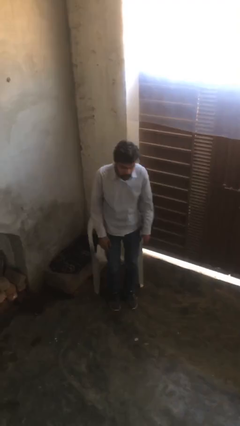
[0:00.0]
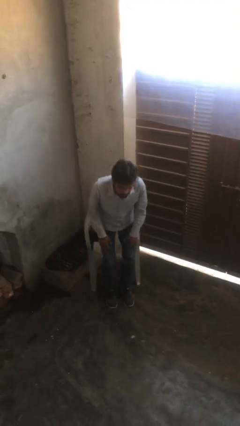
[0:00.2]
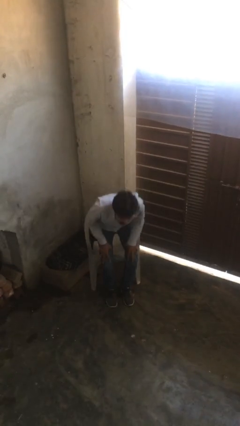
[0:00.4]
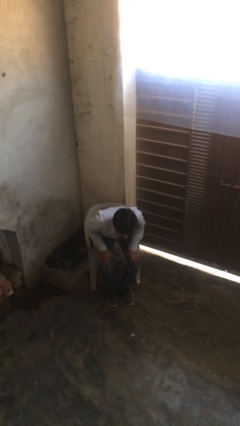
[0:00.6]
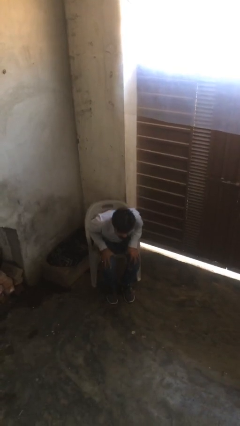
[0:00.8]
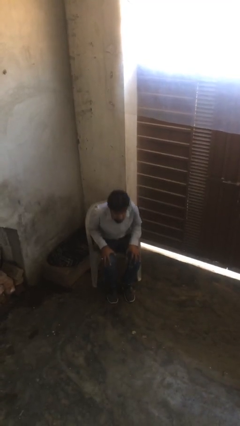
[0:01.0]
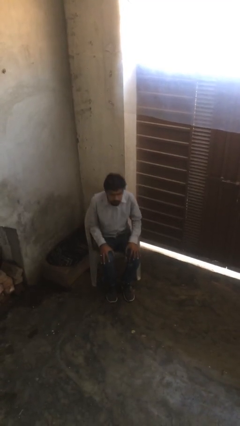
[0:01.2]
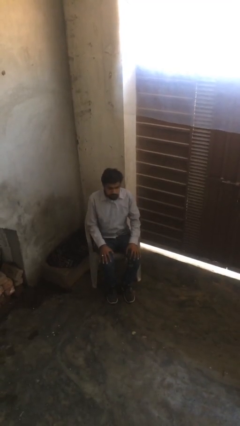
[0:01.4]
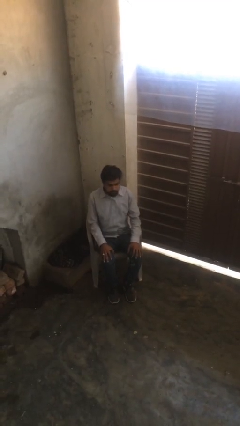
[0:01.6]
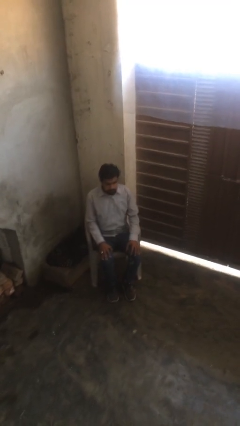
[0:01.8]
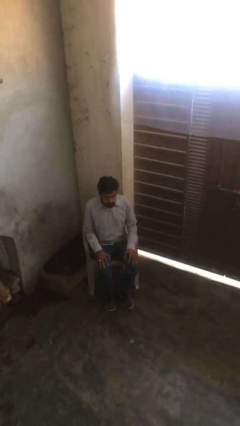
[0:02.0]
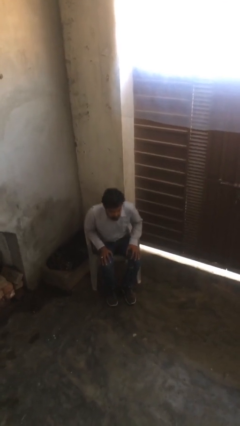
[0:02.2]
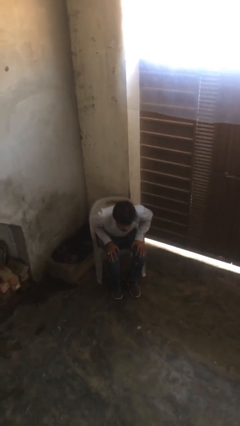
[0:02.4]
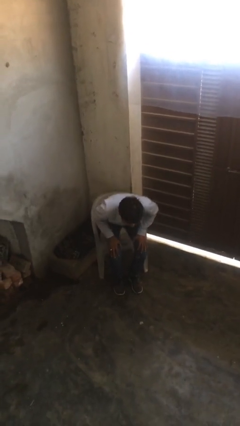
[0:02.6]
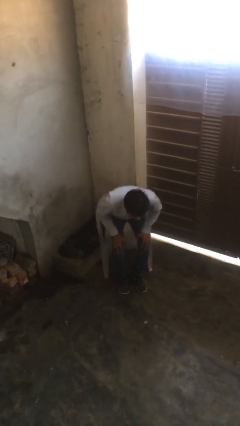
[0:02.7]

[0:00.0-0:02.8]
person sits down

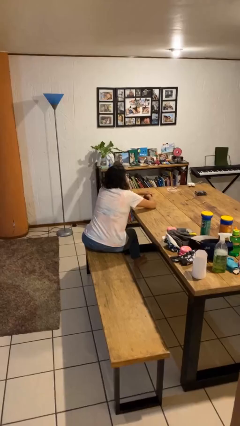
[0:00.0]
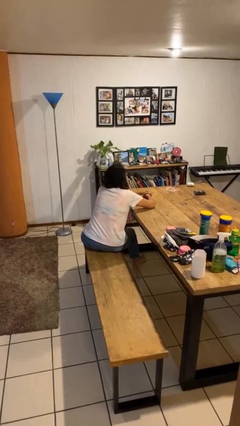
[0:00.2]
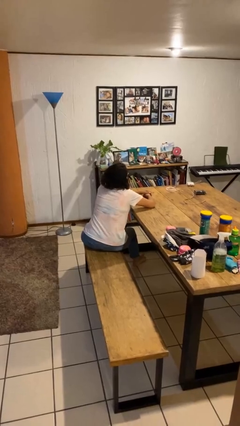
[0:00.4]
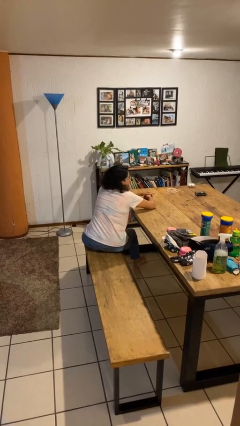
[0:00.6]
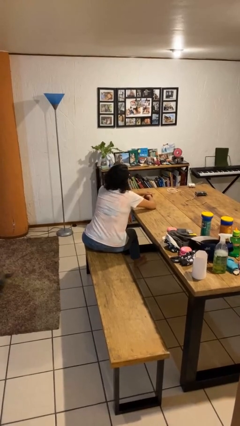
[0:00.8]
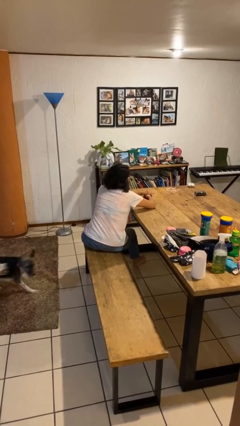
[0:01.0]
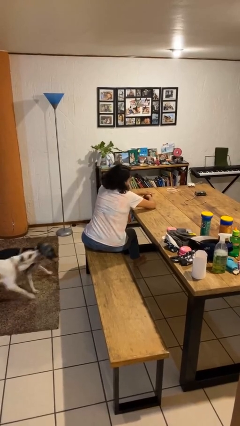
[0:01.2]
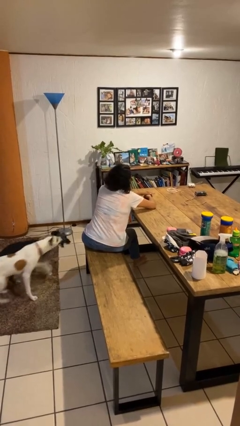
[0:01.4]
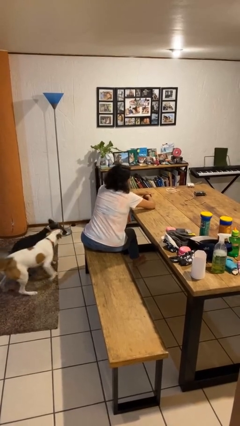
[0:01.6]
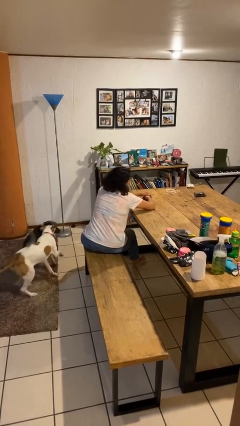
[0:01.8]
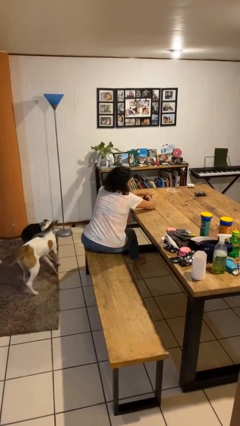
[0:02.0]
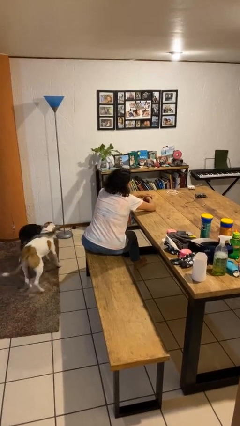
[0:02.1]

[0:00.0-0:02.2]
person shakes head

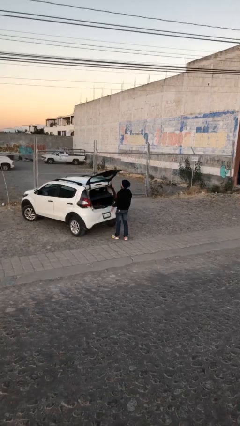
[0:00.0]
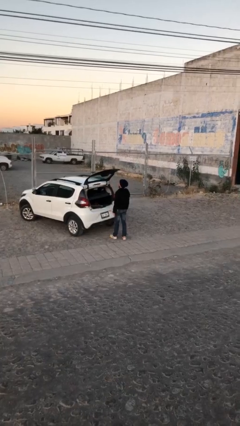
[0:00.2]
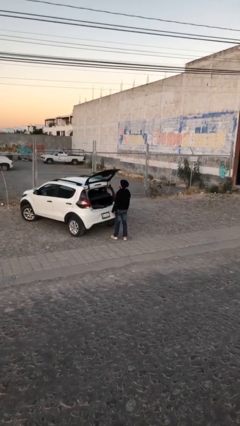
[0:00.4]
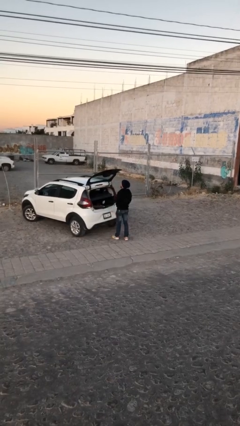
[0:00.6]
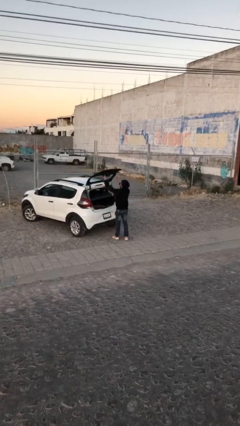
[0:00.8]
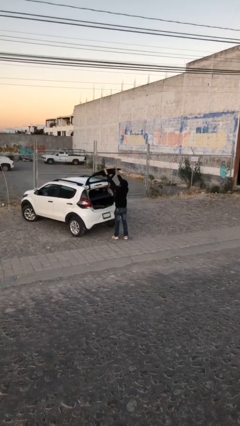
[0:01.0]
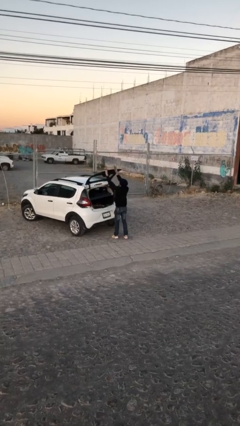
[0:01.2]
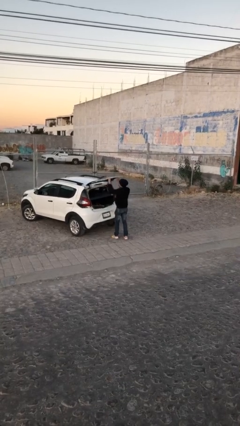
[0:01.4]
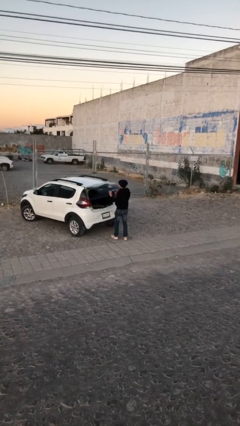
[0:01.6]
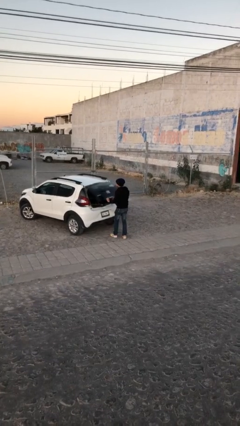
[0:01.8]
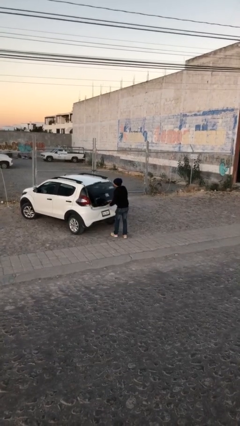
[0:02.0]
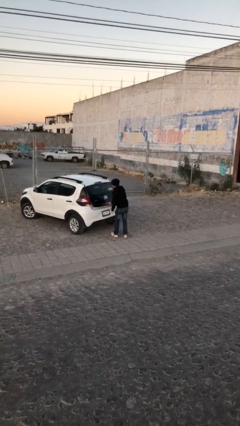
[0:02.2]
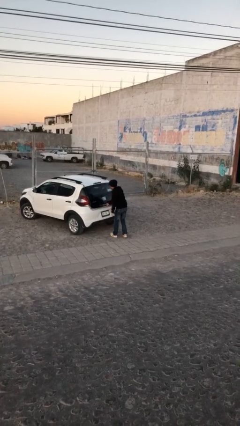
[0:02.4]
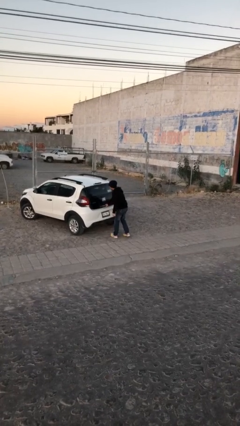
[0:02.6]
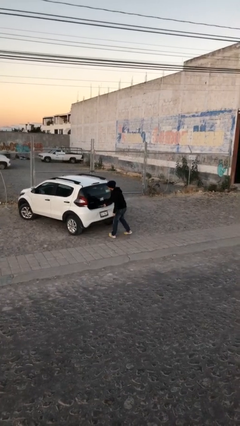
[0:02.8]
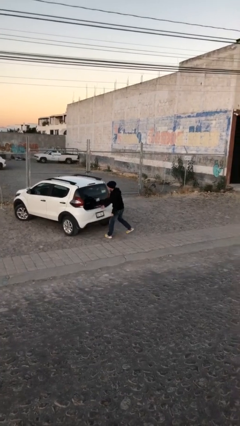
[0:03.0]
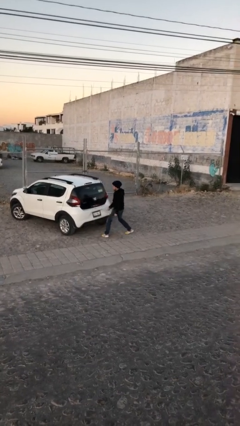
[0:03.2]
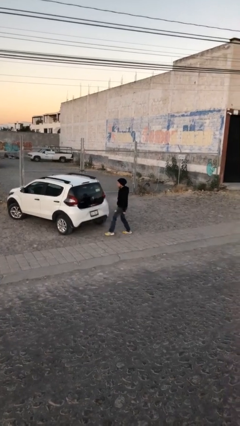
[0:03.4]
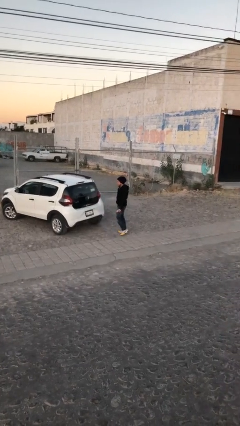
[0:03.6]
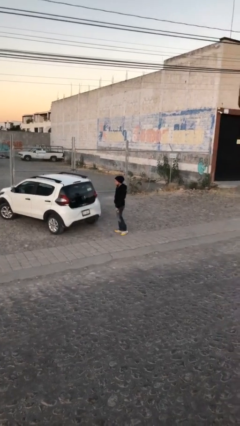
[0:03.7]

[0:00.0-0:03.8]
person closes car trunk

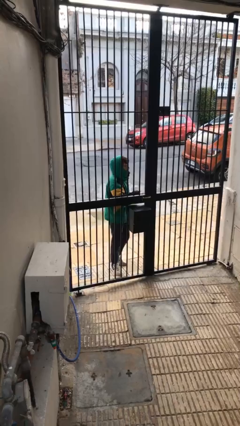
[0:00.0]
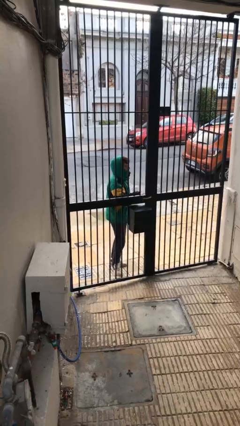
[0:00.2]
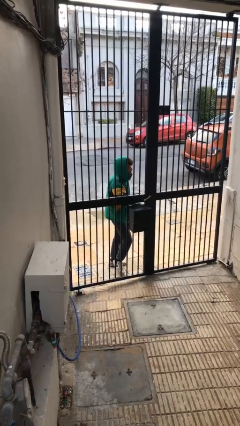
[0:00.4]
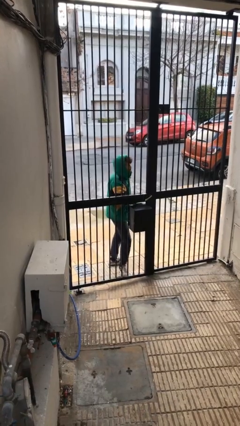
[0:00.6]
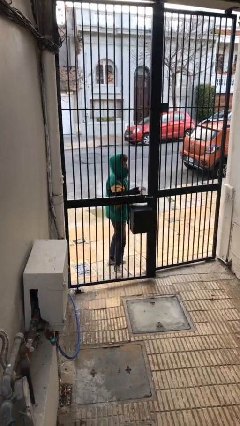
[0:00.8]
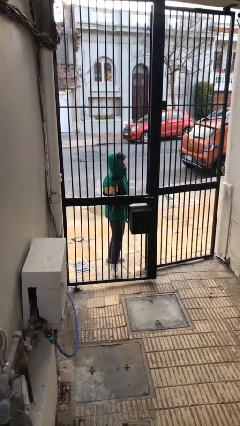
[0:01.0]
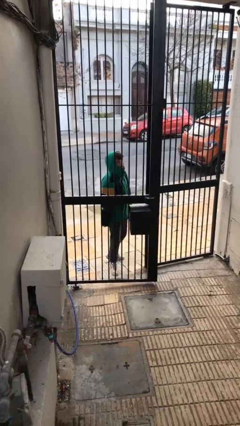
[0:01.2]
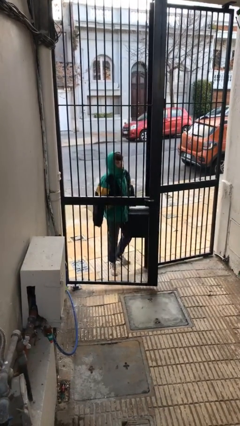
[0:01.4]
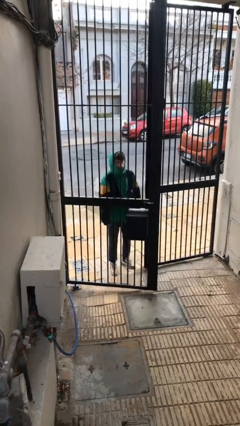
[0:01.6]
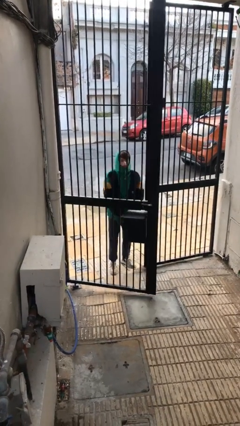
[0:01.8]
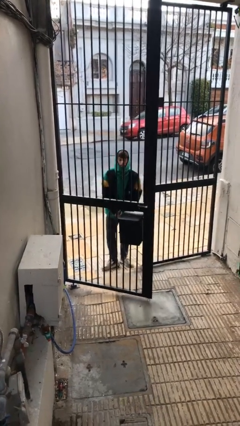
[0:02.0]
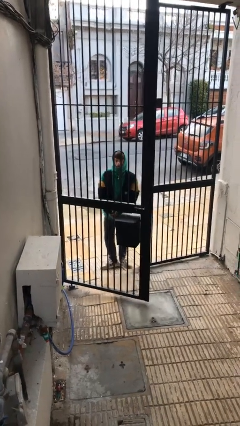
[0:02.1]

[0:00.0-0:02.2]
person opens gate

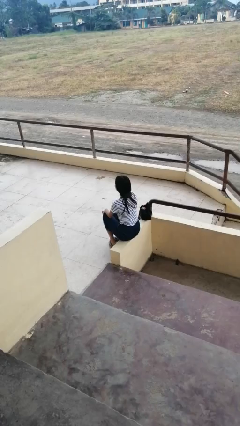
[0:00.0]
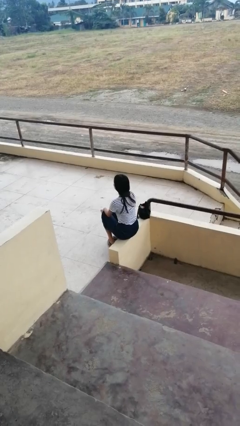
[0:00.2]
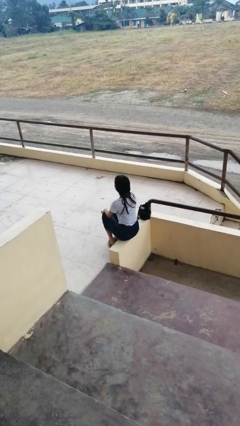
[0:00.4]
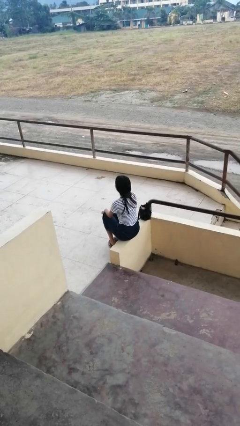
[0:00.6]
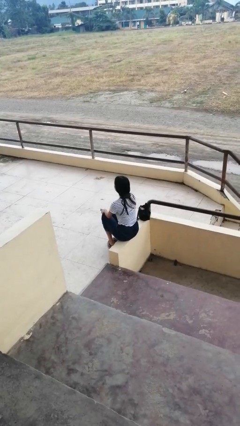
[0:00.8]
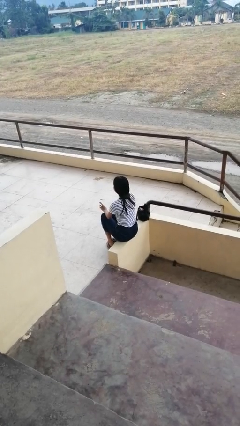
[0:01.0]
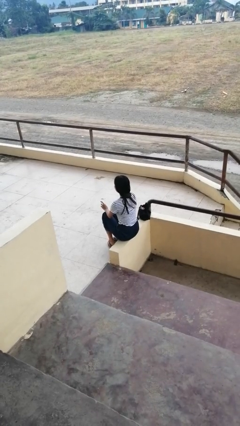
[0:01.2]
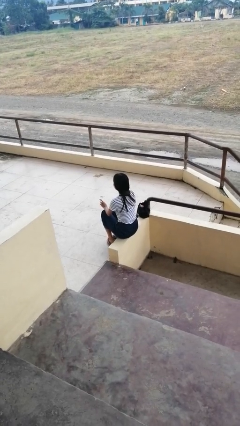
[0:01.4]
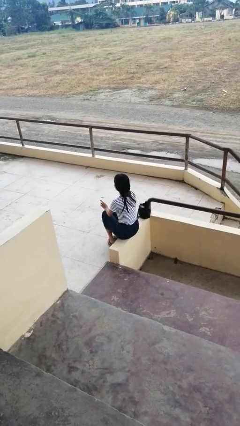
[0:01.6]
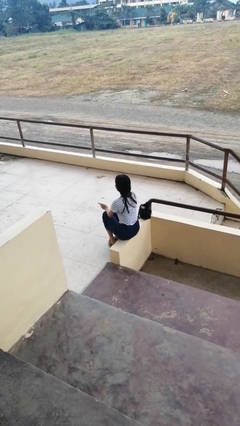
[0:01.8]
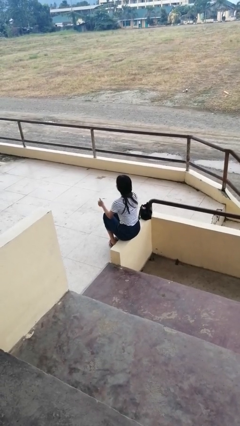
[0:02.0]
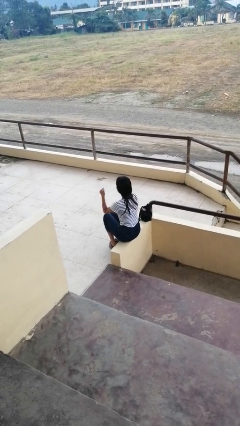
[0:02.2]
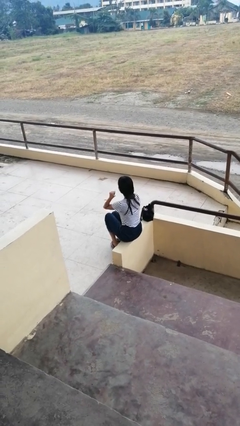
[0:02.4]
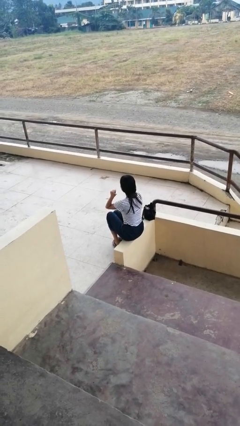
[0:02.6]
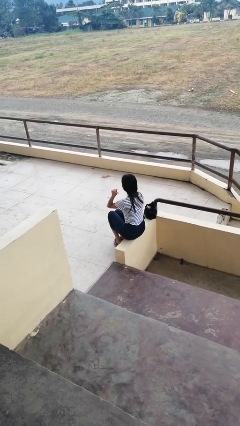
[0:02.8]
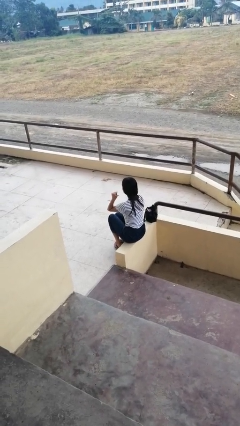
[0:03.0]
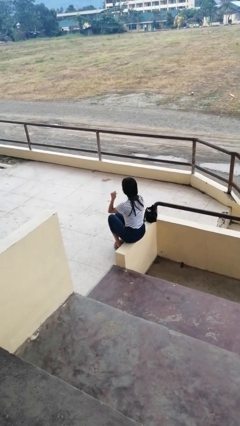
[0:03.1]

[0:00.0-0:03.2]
person gestures behind me

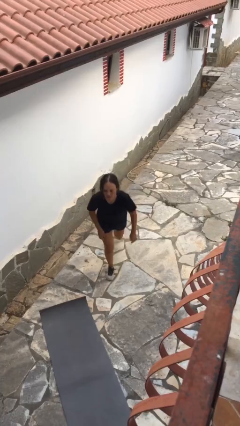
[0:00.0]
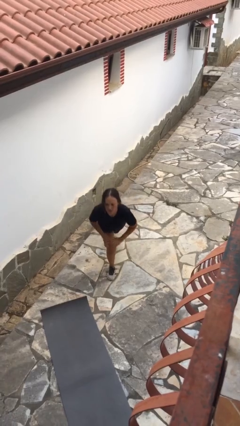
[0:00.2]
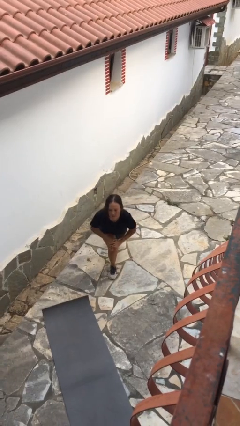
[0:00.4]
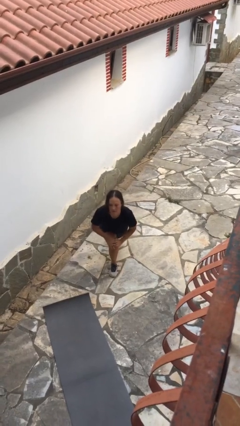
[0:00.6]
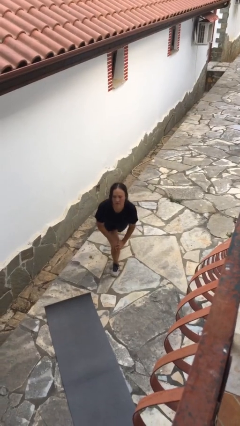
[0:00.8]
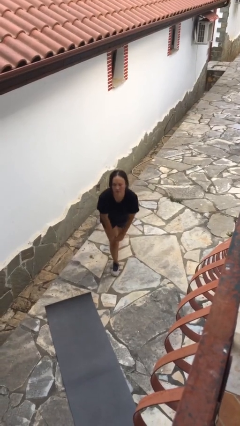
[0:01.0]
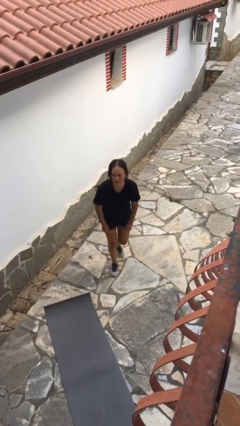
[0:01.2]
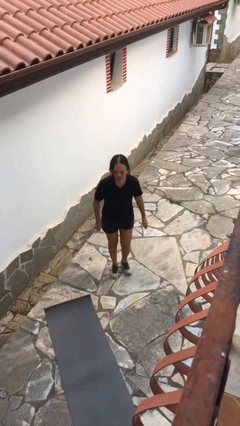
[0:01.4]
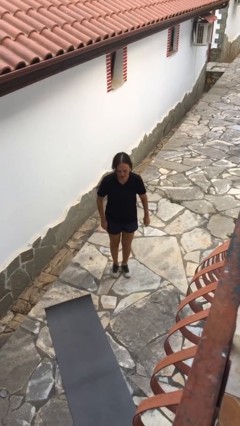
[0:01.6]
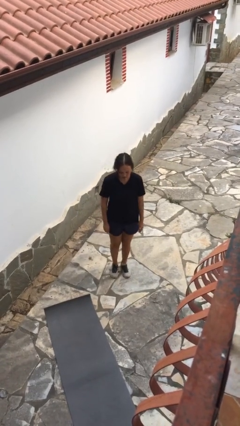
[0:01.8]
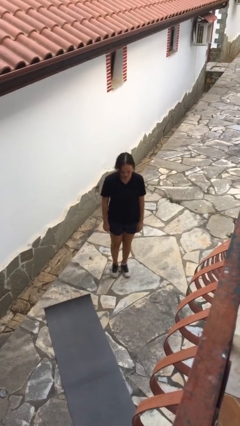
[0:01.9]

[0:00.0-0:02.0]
person exercises with lunges

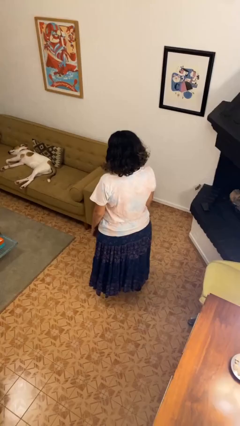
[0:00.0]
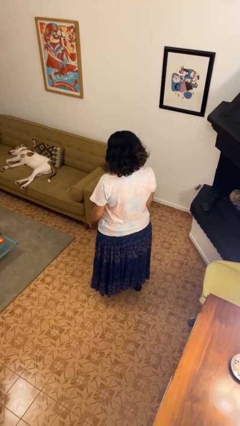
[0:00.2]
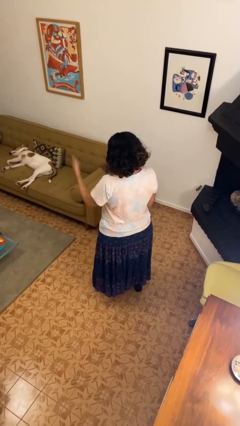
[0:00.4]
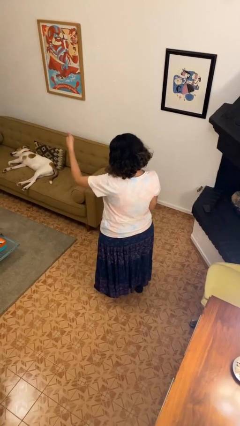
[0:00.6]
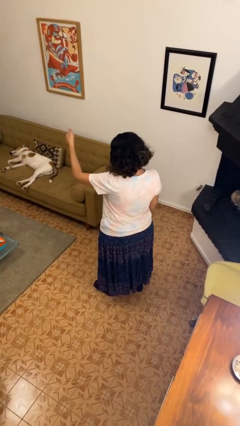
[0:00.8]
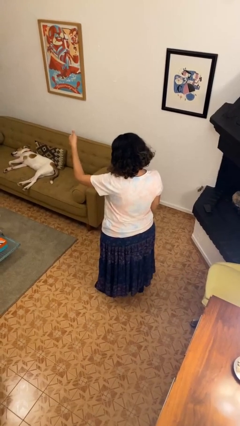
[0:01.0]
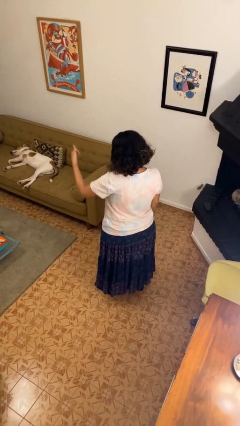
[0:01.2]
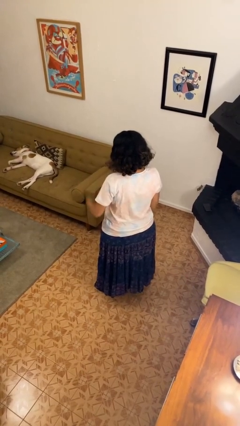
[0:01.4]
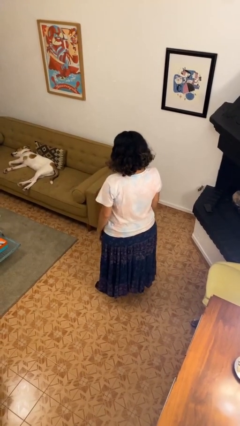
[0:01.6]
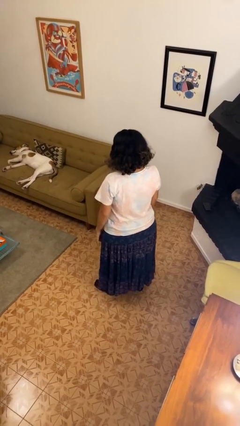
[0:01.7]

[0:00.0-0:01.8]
person gestures thumbs up
